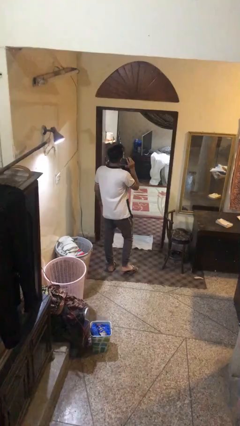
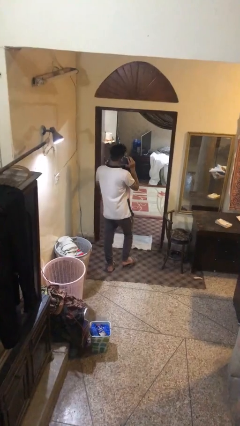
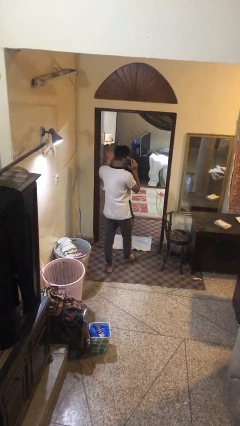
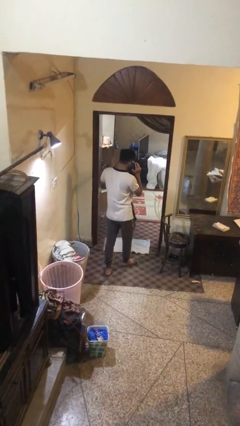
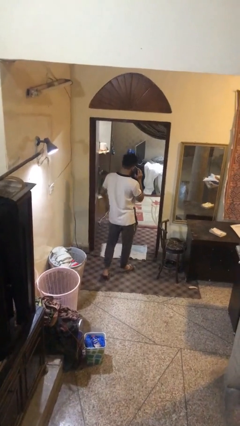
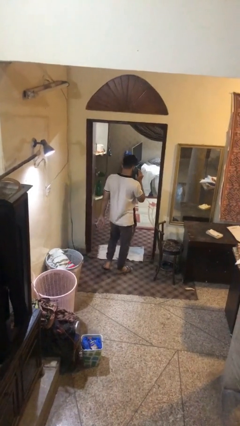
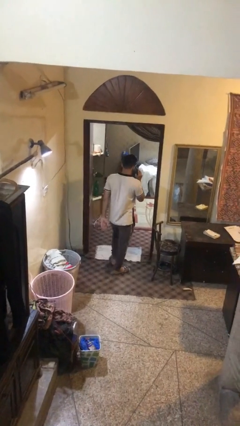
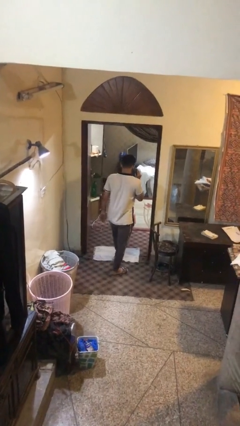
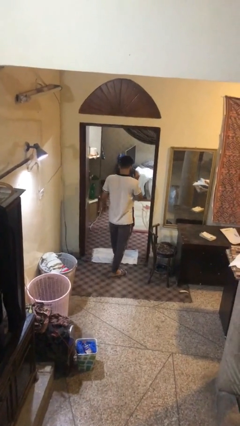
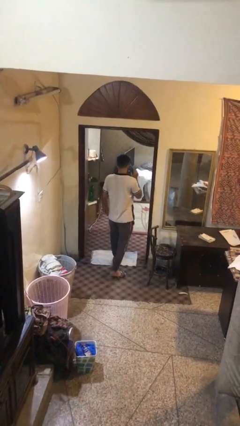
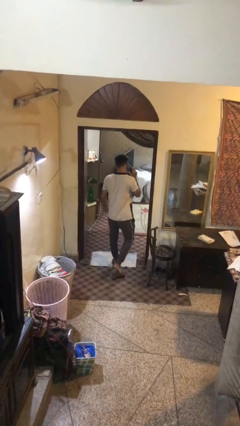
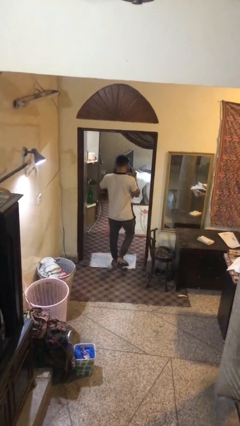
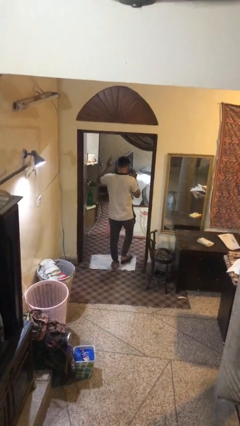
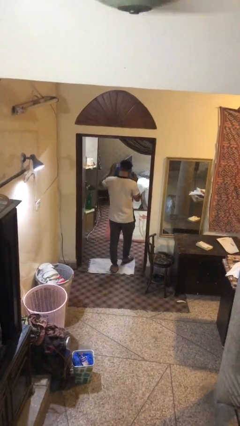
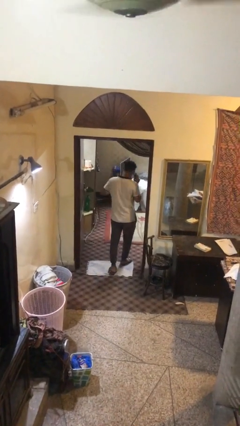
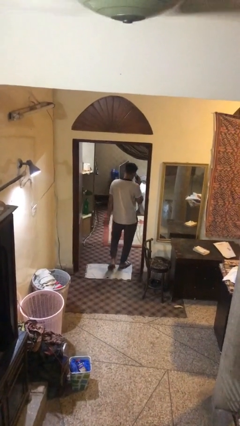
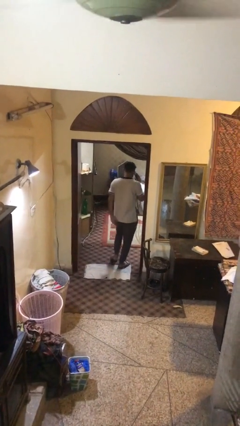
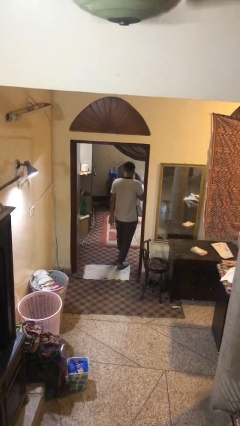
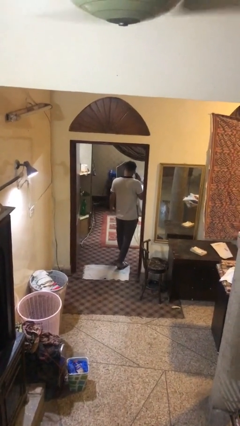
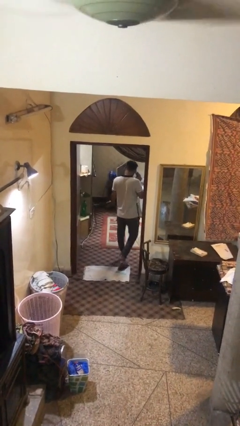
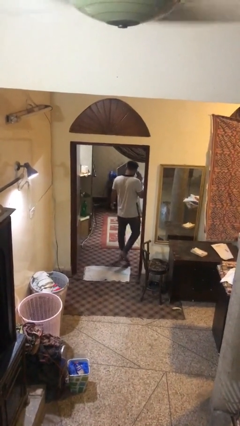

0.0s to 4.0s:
person exits scene through structure

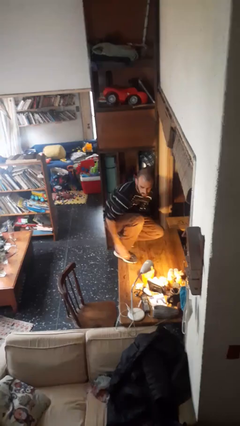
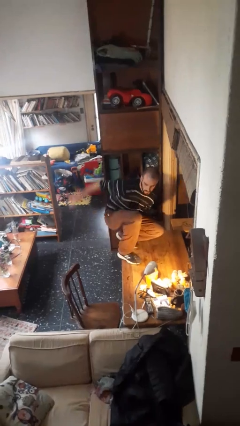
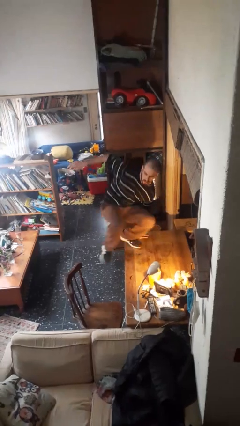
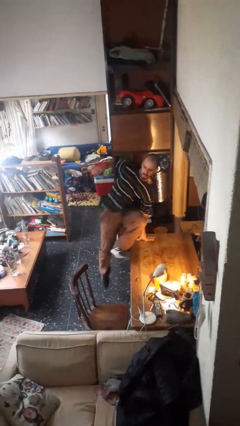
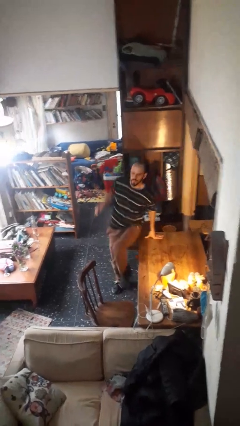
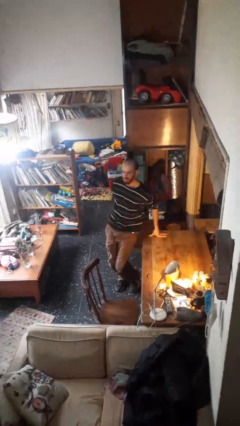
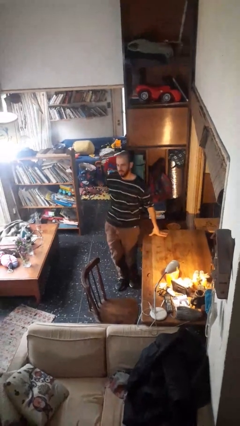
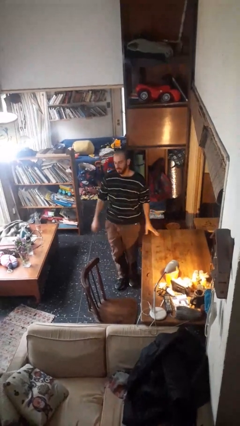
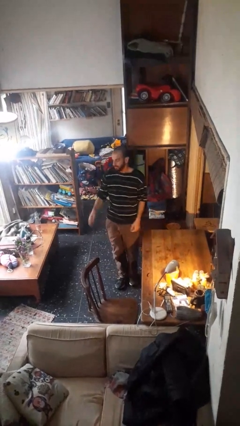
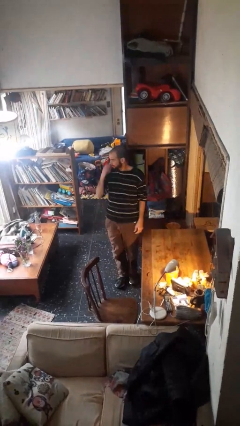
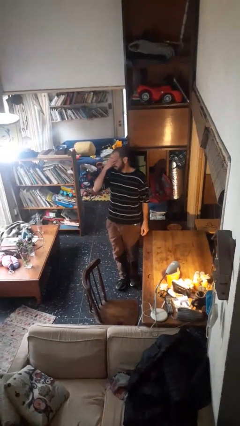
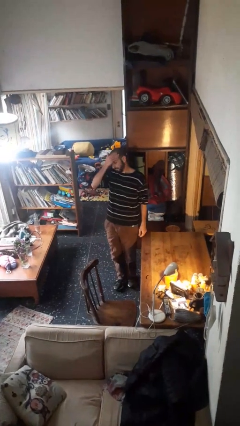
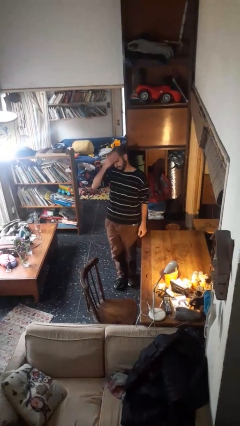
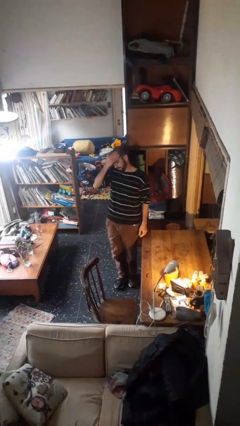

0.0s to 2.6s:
person climbs off table

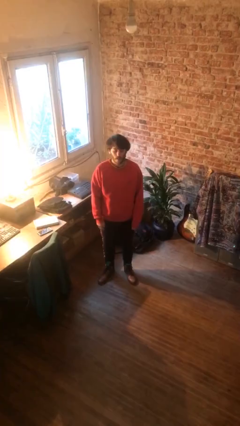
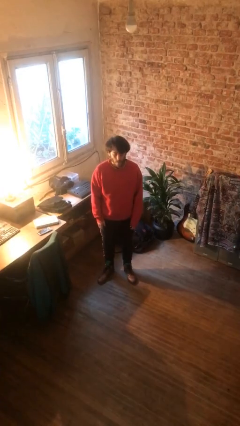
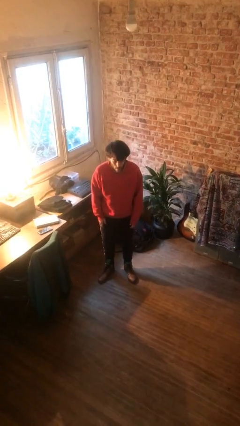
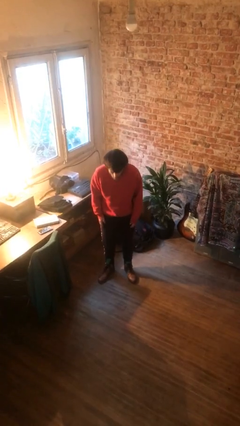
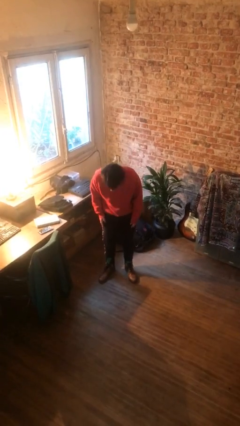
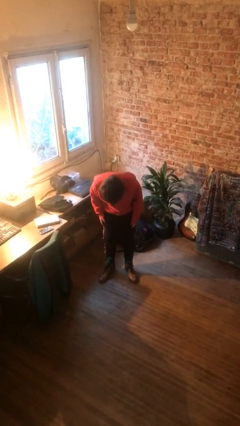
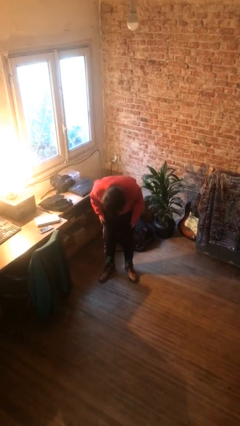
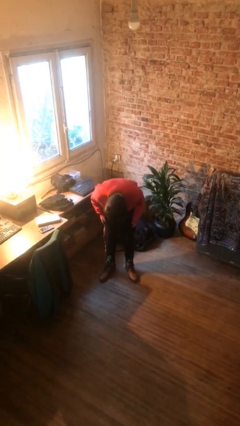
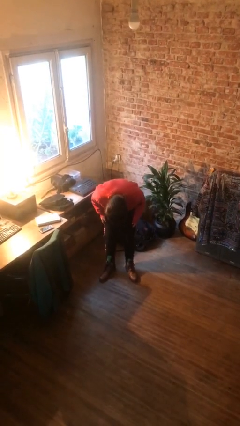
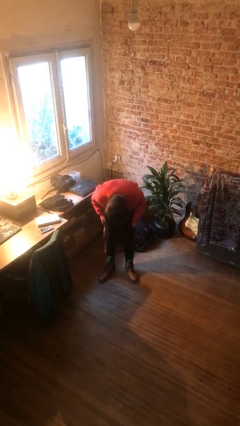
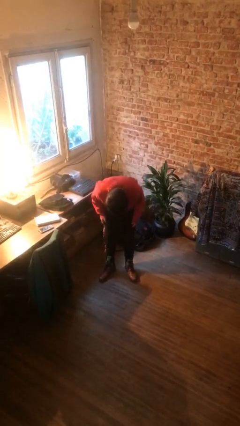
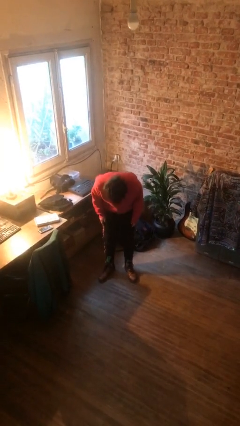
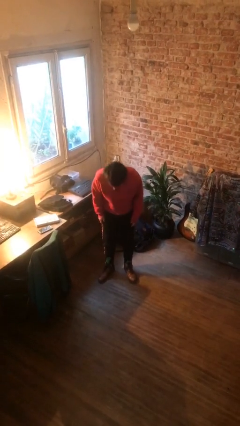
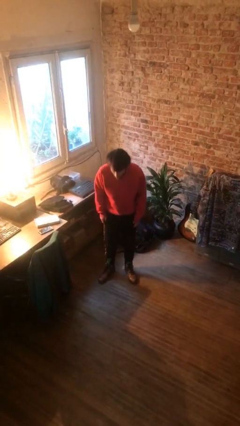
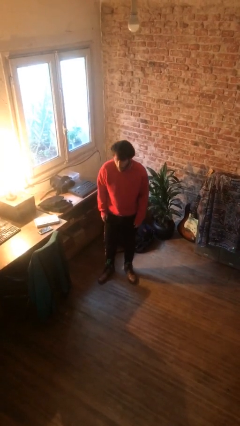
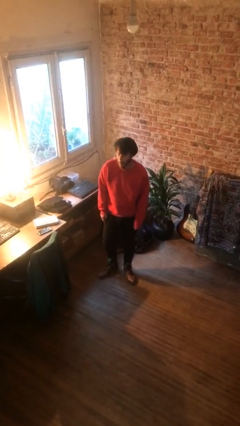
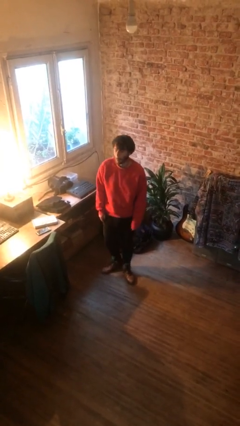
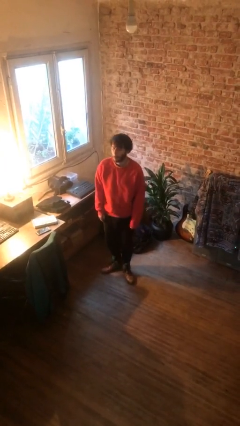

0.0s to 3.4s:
person bows

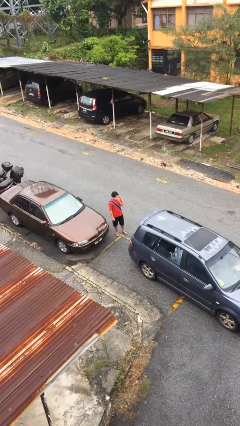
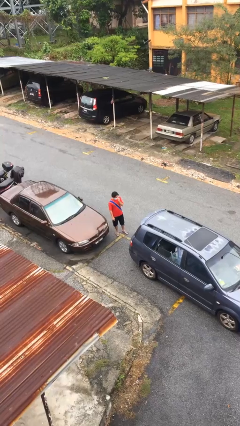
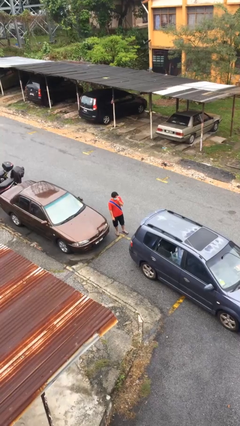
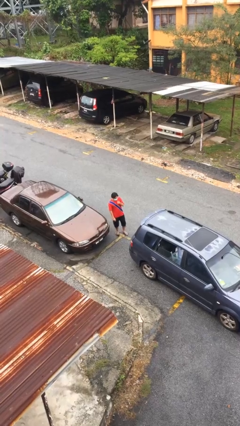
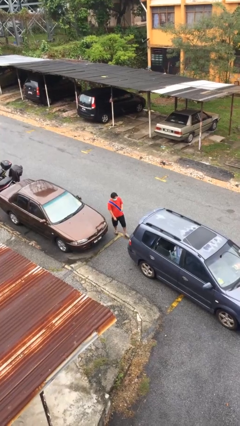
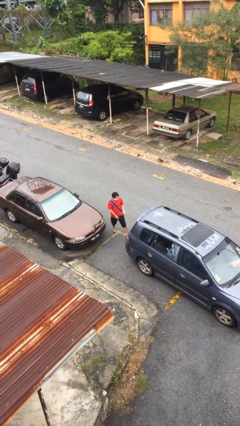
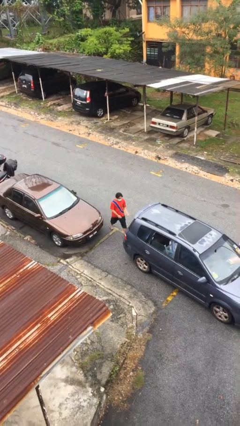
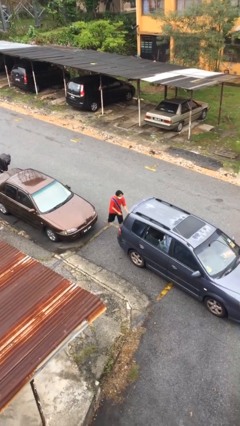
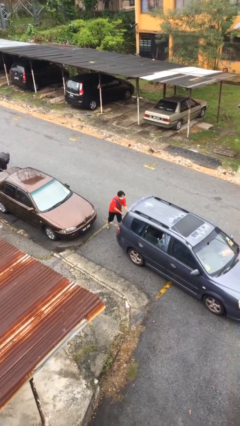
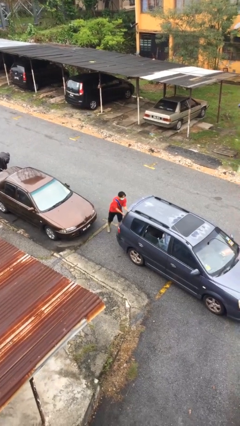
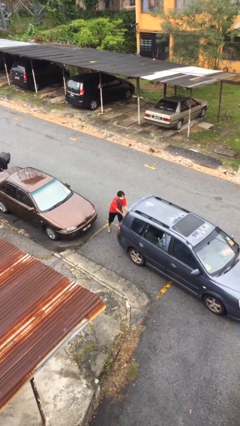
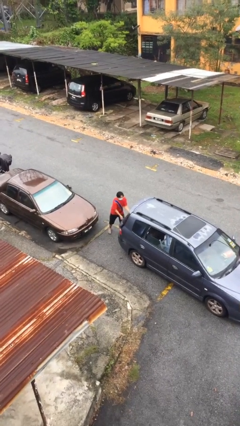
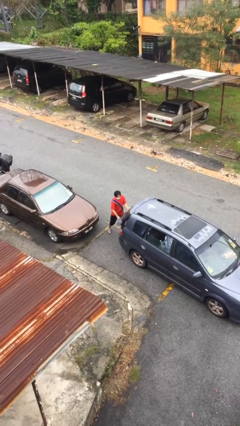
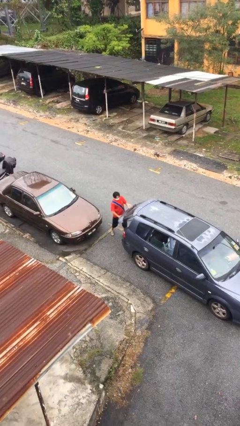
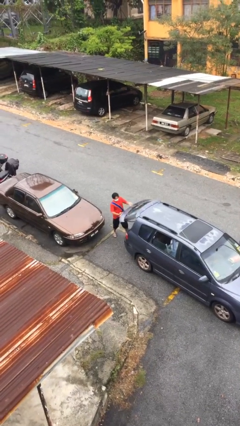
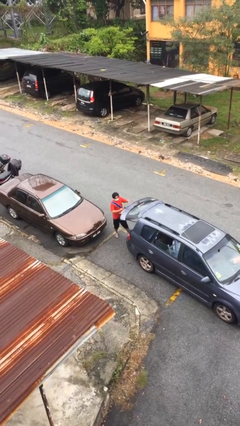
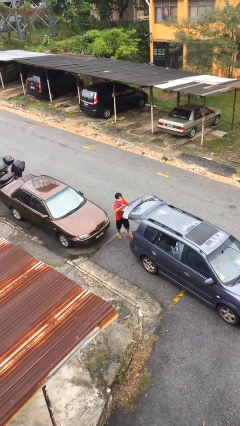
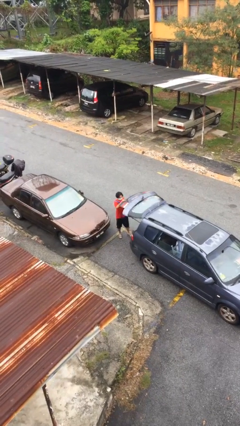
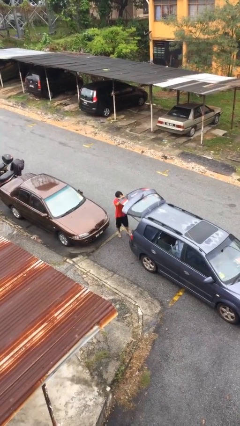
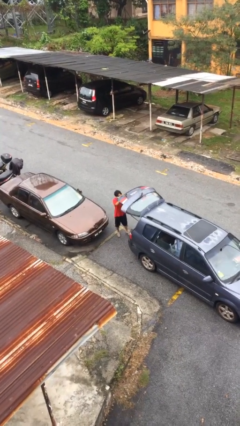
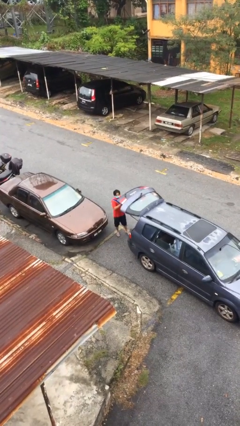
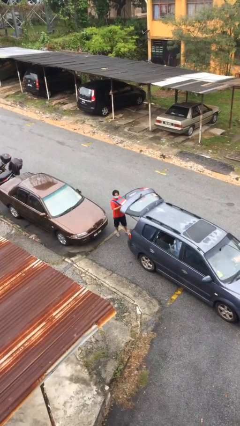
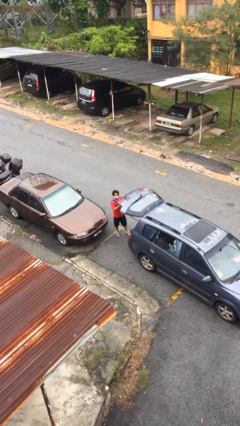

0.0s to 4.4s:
person opens car trunk

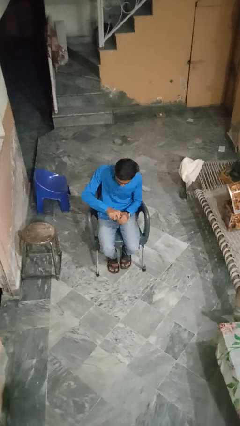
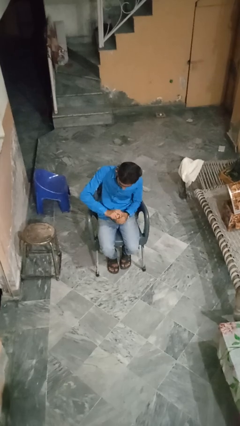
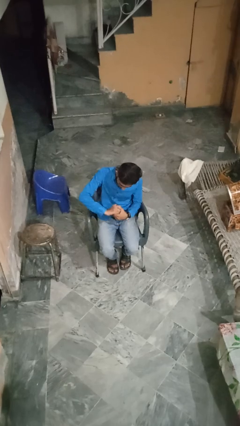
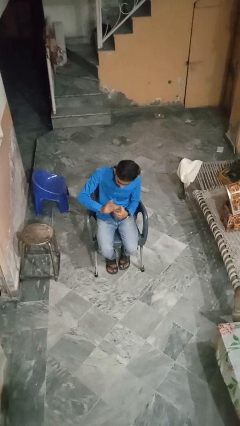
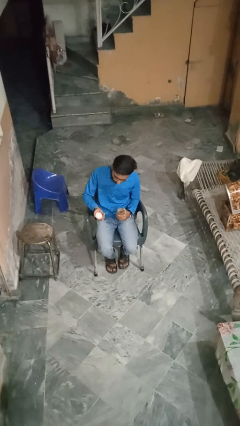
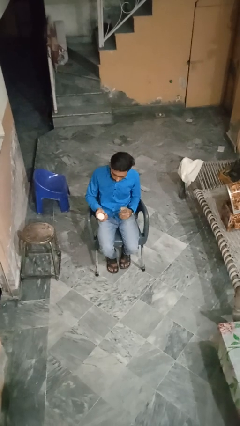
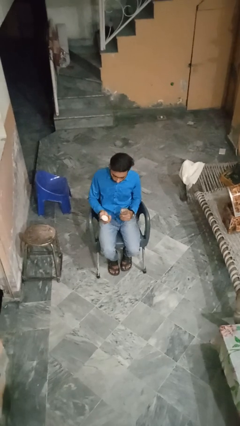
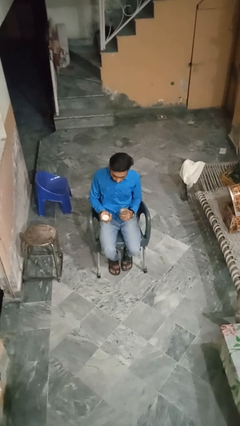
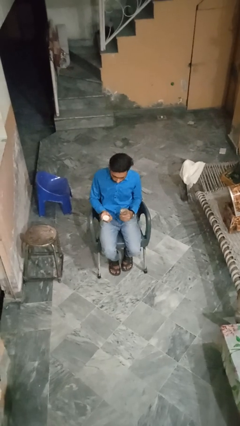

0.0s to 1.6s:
person opens jar

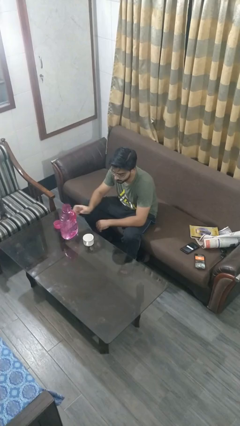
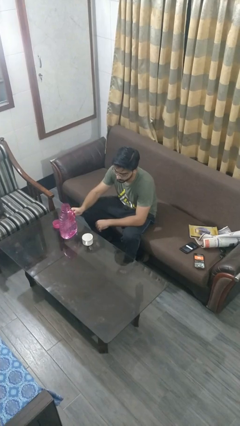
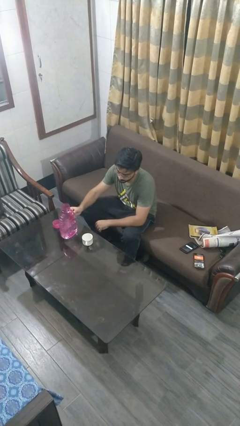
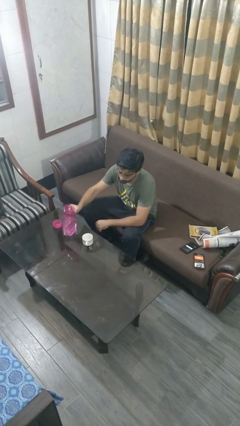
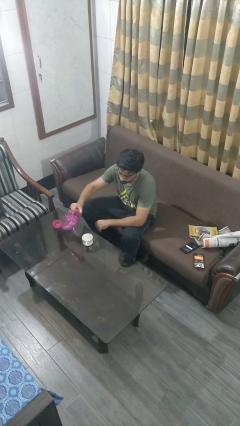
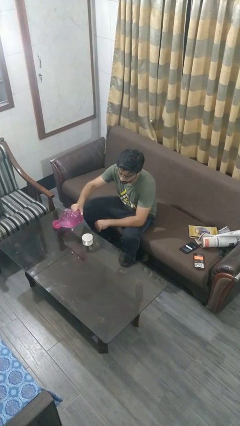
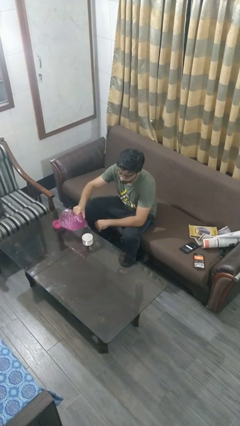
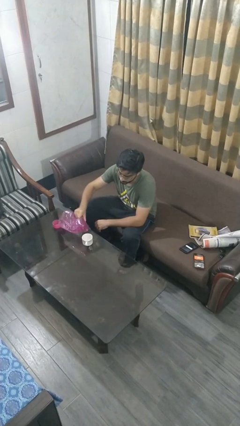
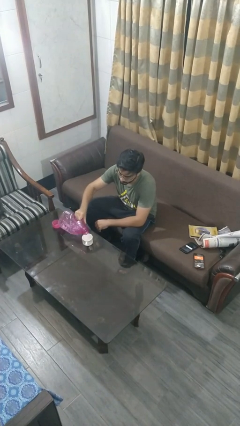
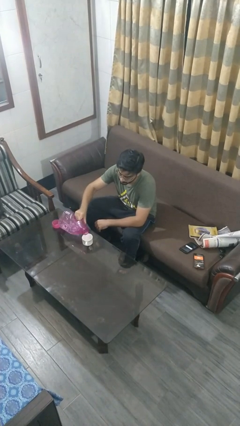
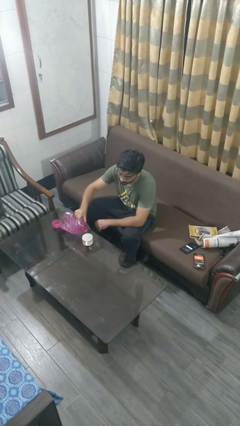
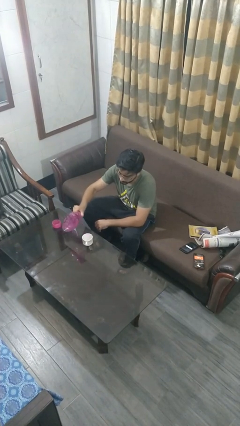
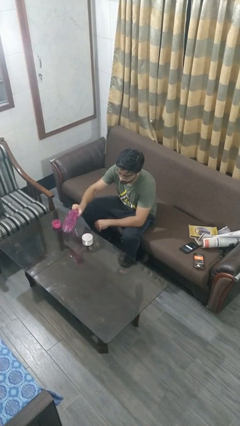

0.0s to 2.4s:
person pours liquid into cup
